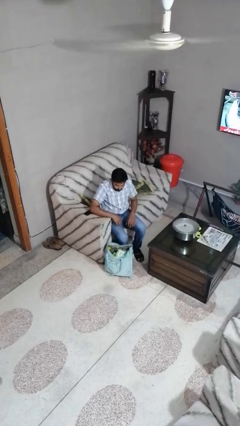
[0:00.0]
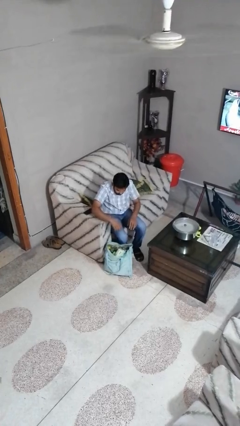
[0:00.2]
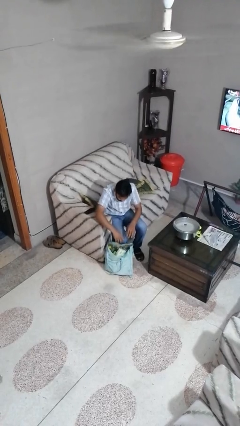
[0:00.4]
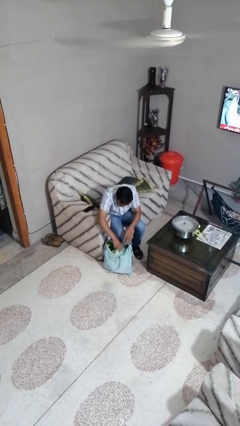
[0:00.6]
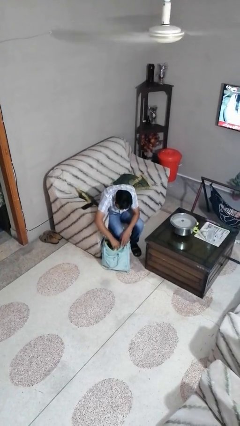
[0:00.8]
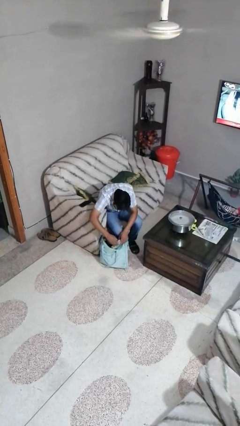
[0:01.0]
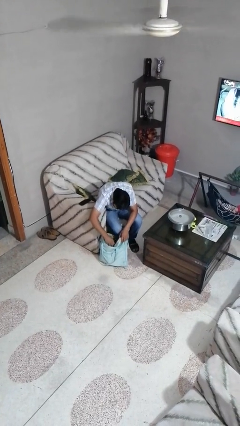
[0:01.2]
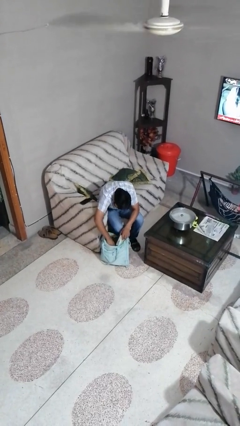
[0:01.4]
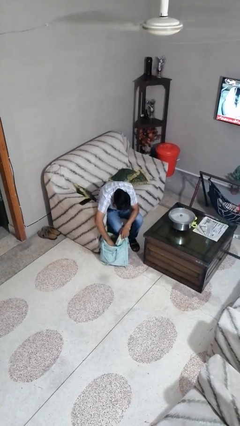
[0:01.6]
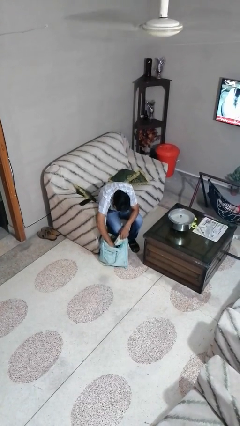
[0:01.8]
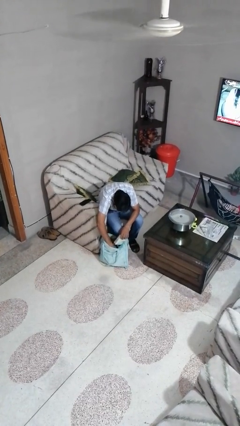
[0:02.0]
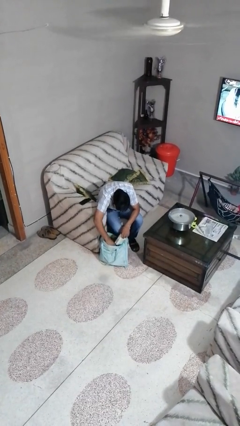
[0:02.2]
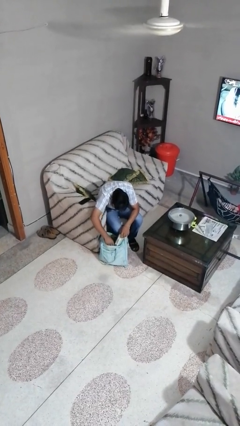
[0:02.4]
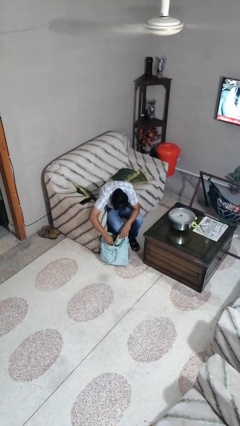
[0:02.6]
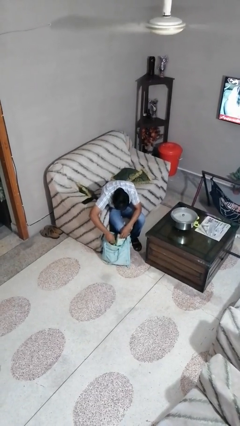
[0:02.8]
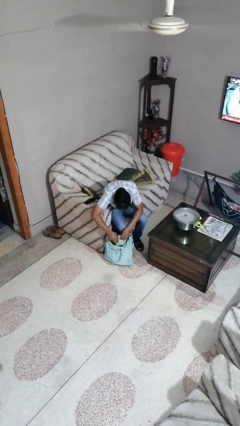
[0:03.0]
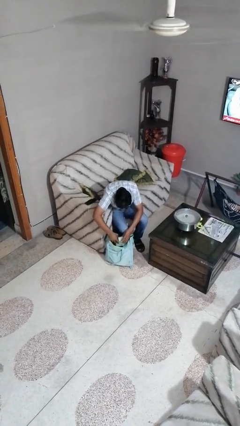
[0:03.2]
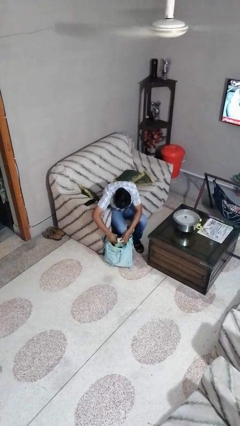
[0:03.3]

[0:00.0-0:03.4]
person searches in bag

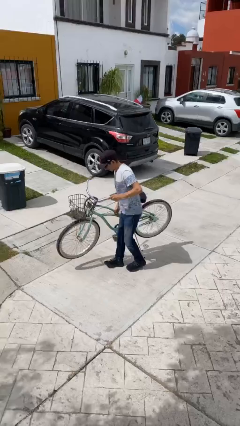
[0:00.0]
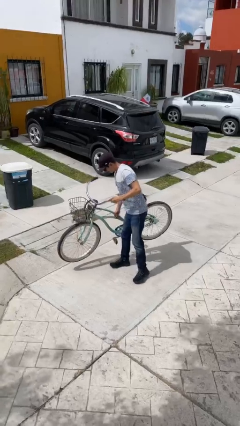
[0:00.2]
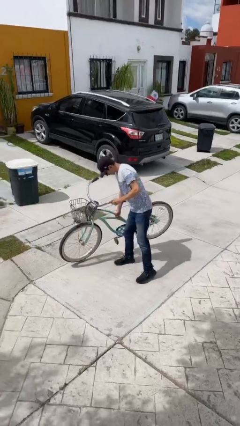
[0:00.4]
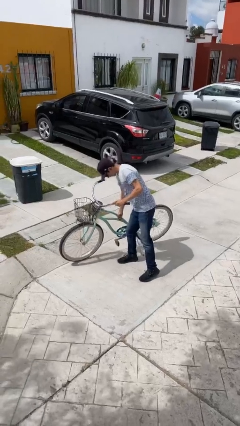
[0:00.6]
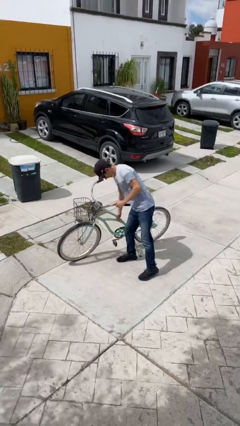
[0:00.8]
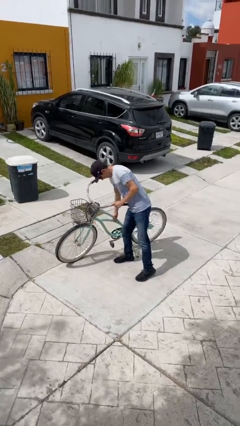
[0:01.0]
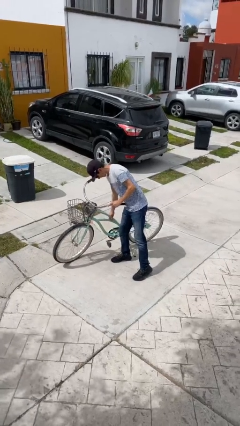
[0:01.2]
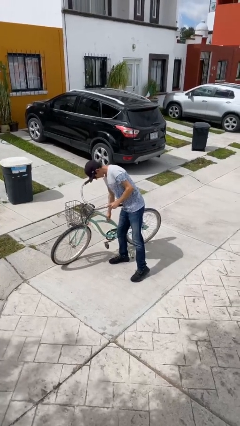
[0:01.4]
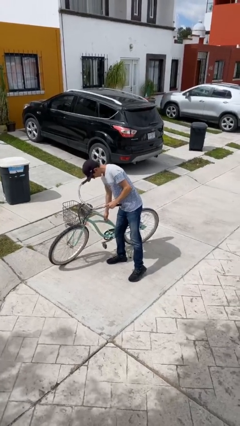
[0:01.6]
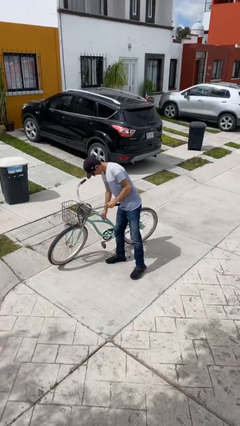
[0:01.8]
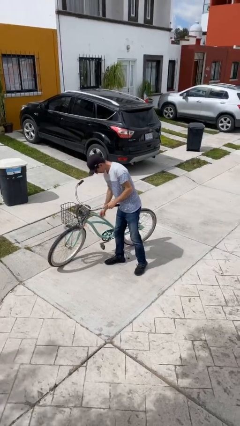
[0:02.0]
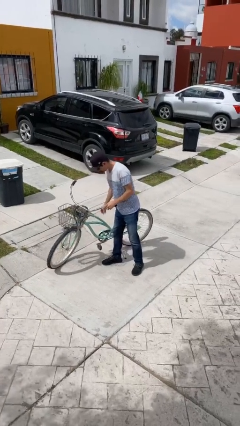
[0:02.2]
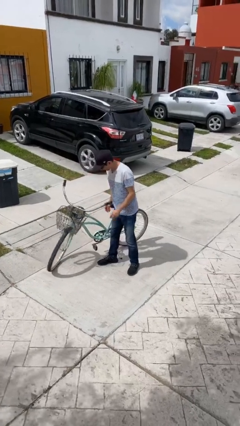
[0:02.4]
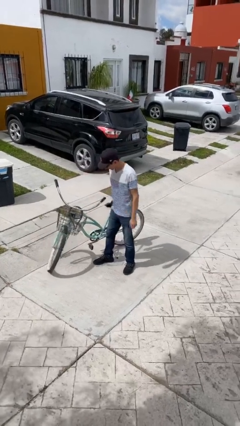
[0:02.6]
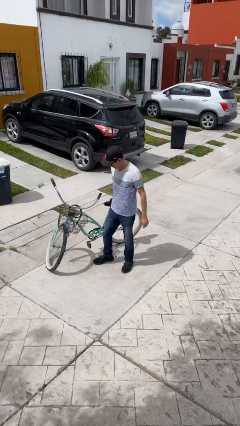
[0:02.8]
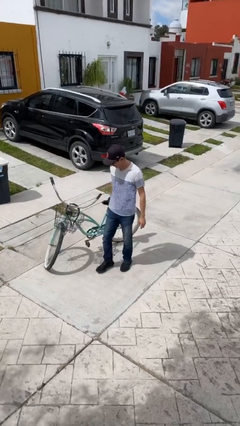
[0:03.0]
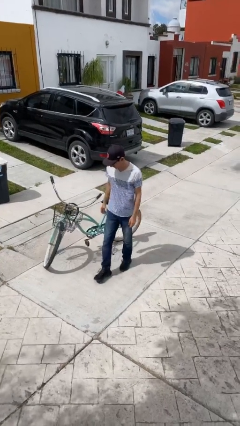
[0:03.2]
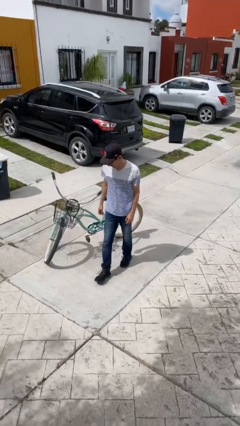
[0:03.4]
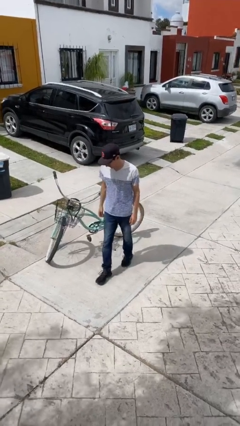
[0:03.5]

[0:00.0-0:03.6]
person puts down object on floor

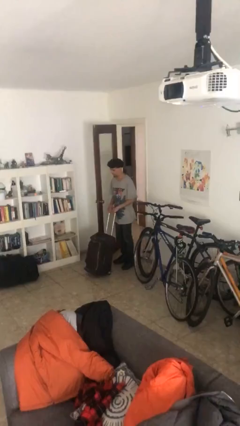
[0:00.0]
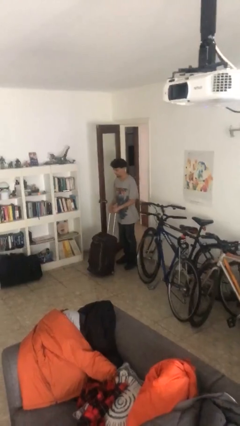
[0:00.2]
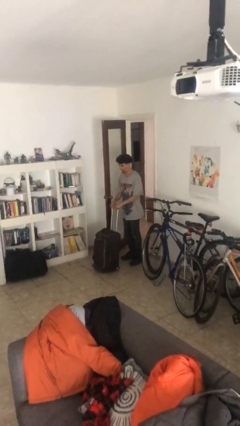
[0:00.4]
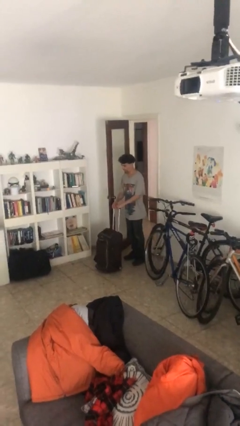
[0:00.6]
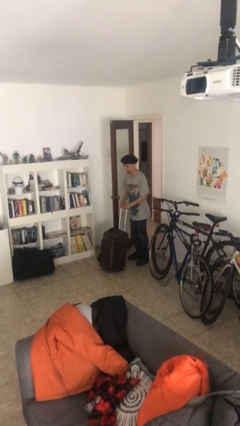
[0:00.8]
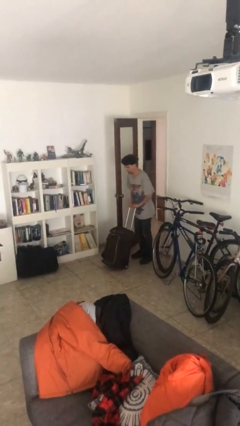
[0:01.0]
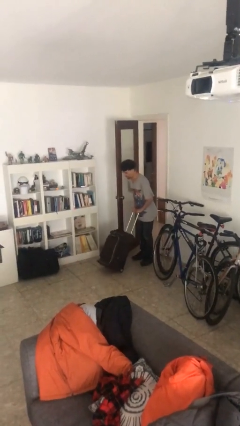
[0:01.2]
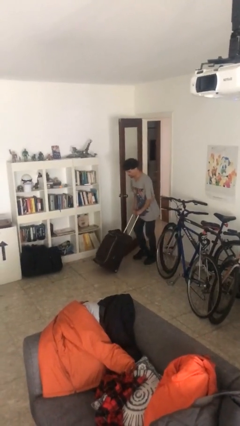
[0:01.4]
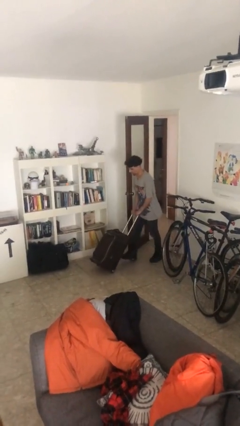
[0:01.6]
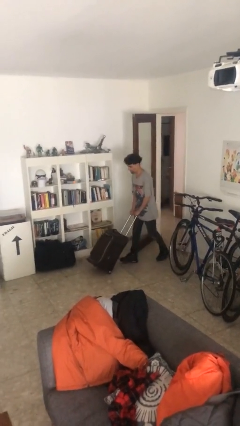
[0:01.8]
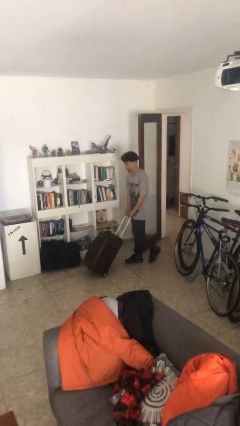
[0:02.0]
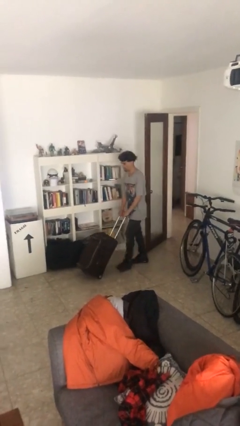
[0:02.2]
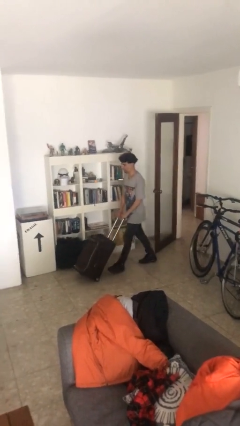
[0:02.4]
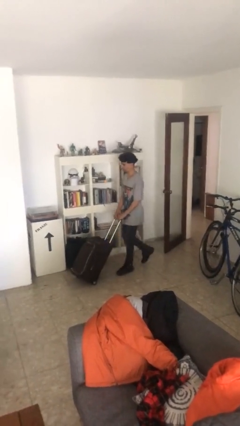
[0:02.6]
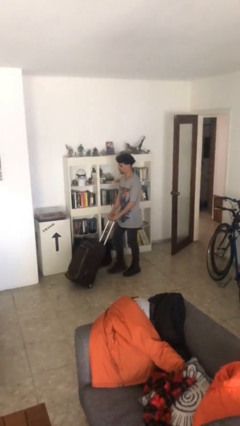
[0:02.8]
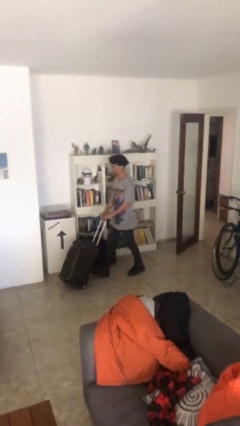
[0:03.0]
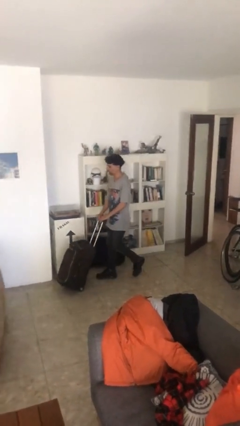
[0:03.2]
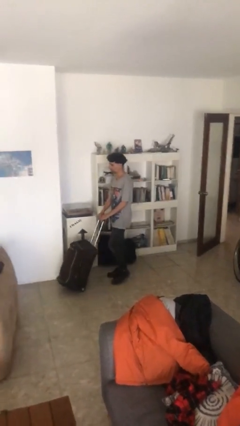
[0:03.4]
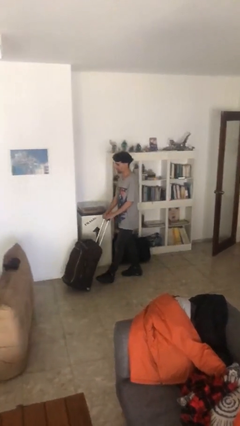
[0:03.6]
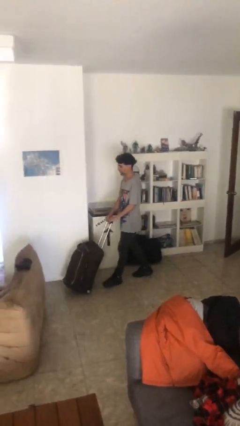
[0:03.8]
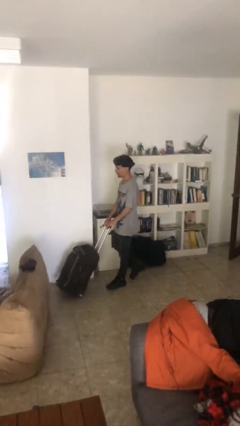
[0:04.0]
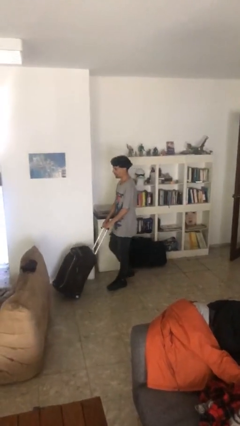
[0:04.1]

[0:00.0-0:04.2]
person pushes wheeled cart

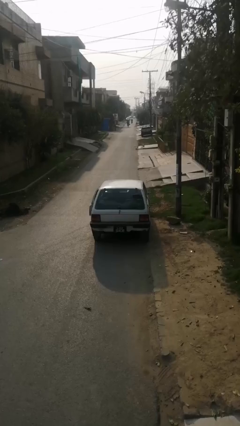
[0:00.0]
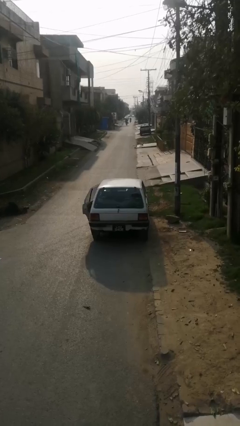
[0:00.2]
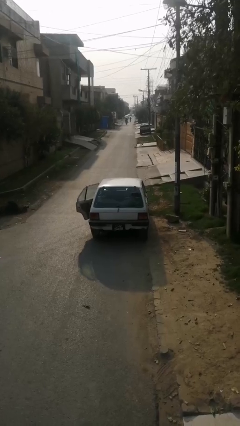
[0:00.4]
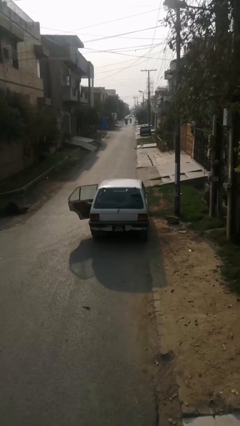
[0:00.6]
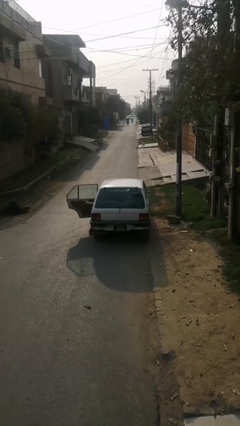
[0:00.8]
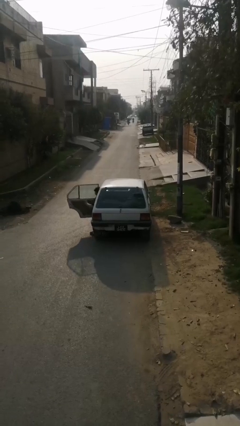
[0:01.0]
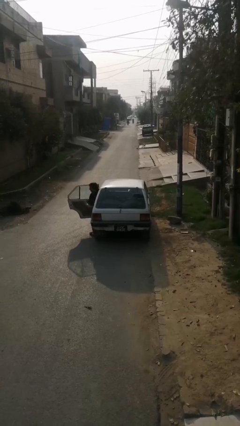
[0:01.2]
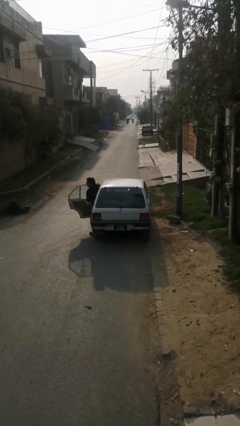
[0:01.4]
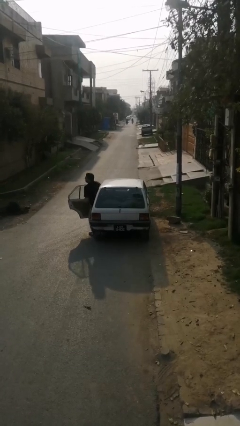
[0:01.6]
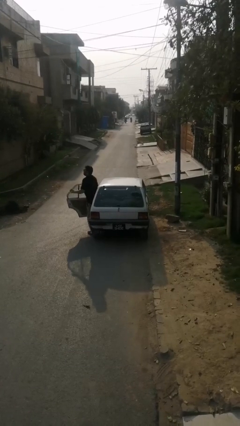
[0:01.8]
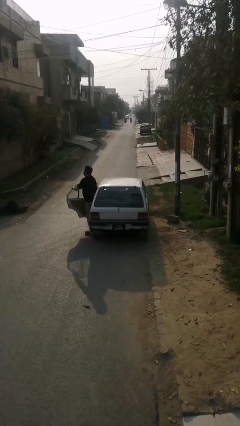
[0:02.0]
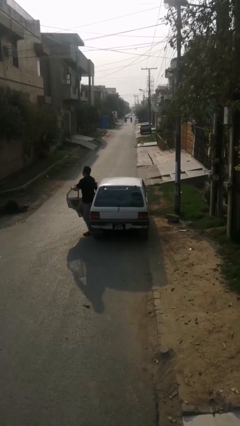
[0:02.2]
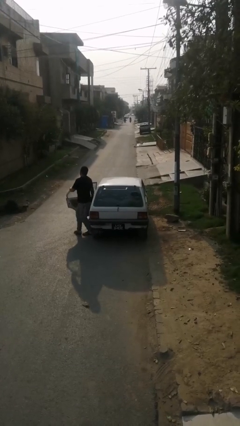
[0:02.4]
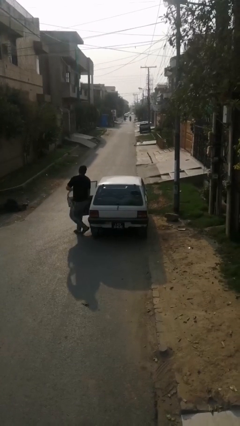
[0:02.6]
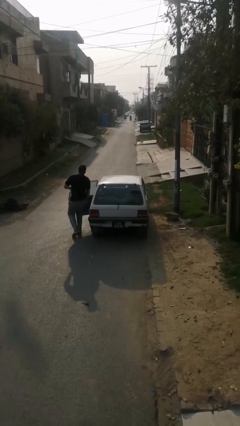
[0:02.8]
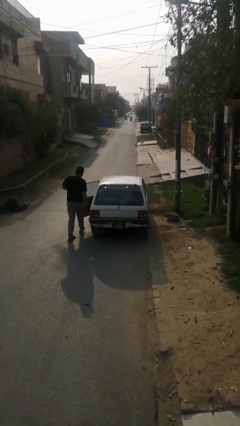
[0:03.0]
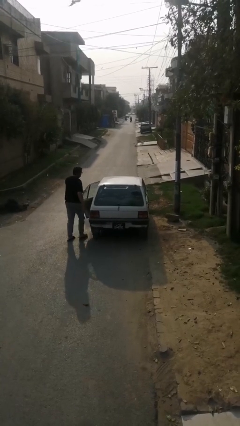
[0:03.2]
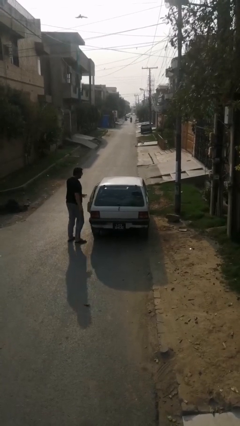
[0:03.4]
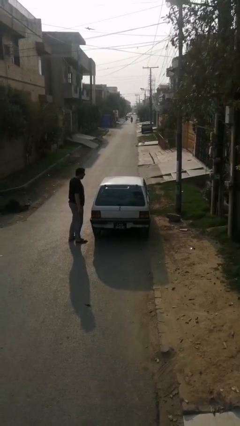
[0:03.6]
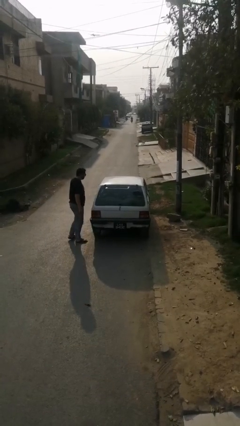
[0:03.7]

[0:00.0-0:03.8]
car drops off person

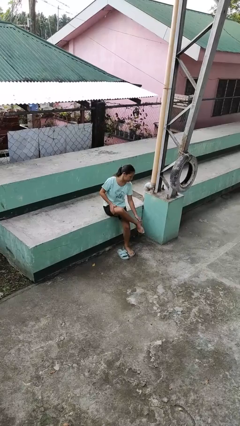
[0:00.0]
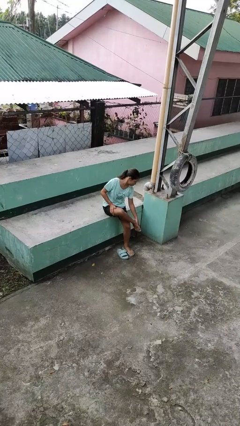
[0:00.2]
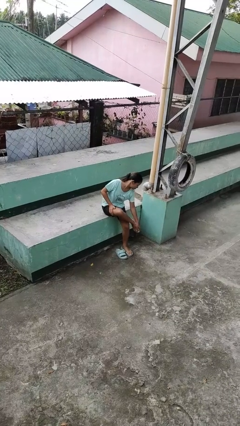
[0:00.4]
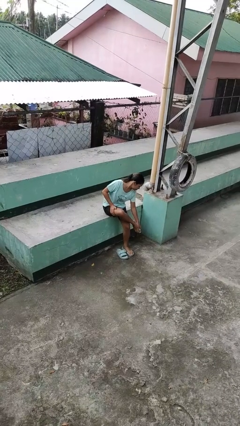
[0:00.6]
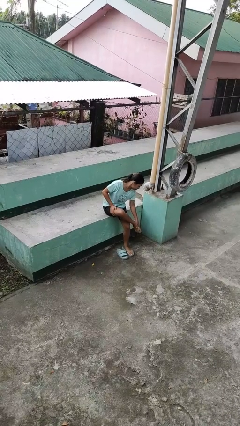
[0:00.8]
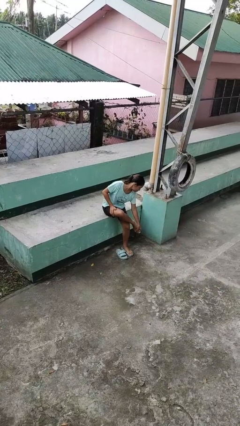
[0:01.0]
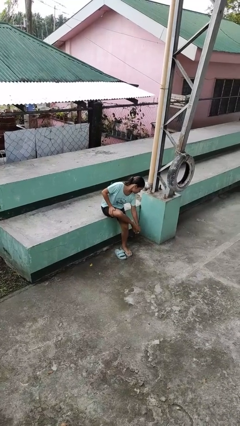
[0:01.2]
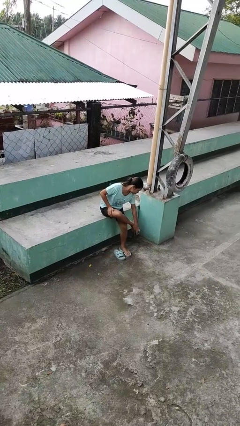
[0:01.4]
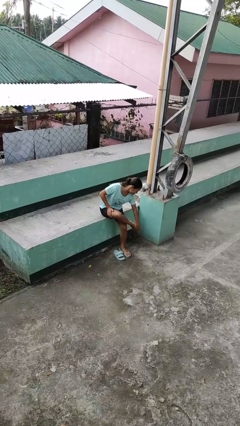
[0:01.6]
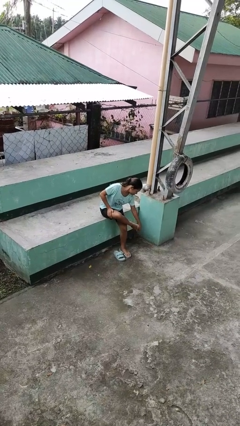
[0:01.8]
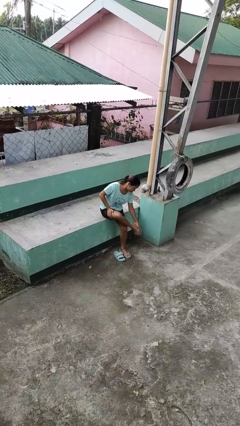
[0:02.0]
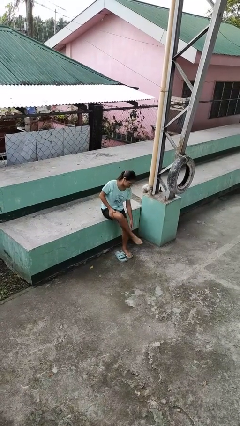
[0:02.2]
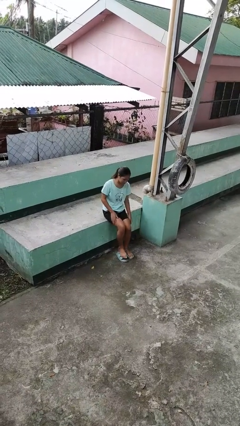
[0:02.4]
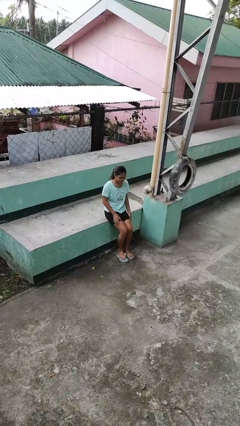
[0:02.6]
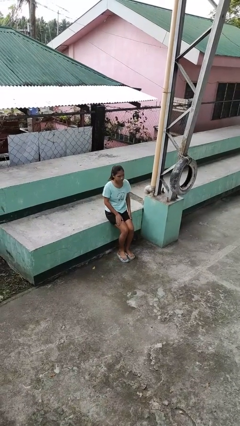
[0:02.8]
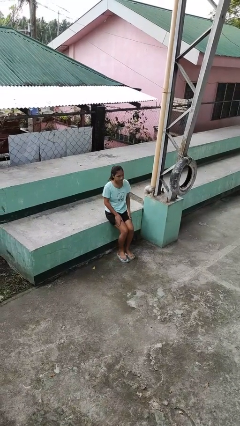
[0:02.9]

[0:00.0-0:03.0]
person rubs foot
